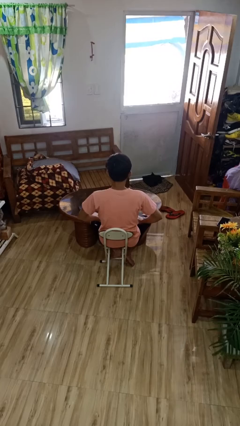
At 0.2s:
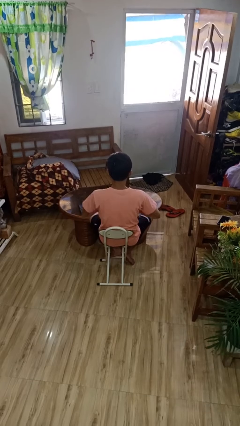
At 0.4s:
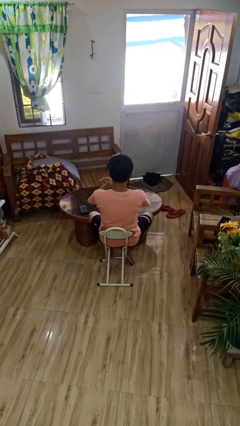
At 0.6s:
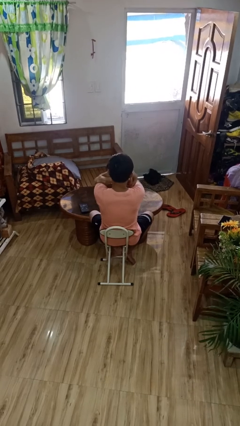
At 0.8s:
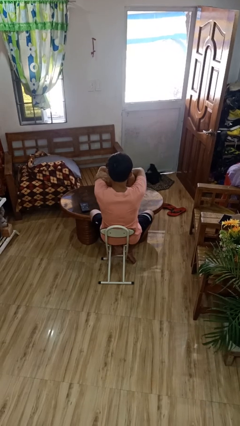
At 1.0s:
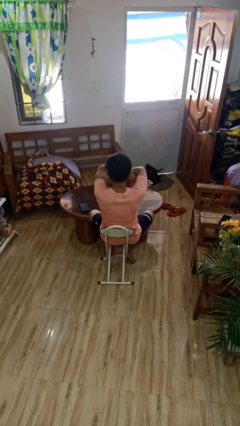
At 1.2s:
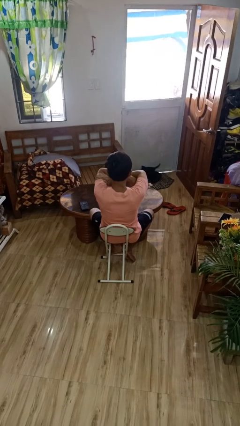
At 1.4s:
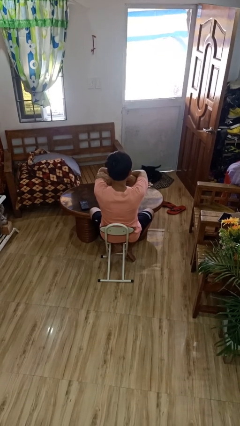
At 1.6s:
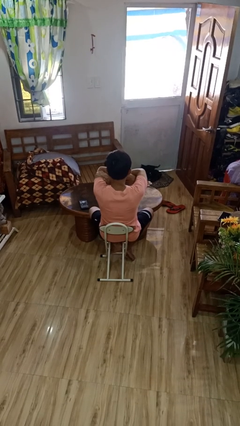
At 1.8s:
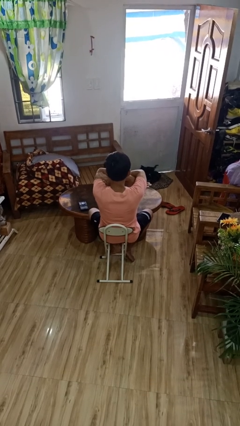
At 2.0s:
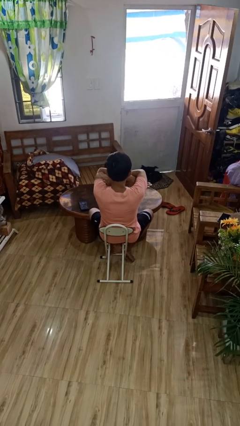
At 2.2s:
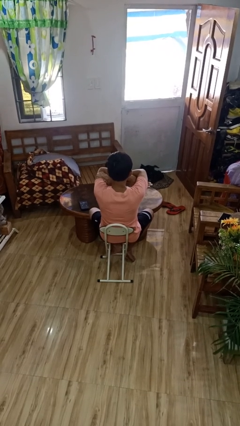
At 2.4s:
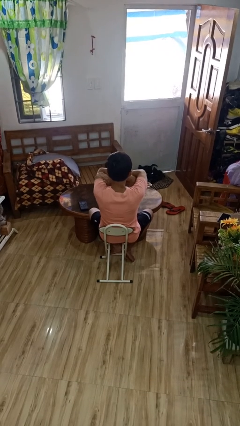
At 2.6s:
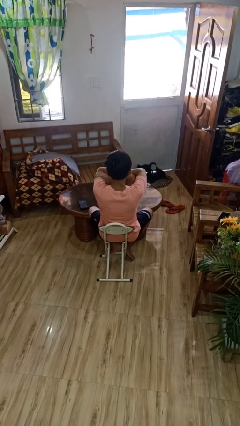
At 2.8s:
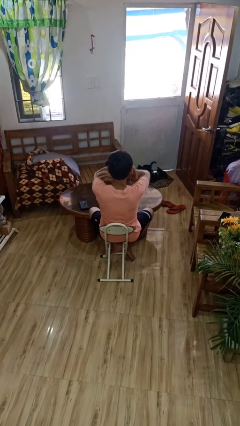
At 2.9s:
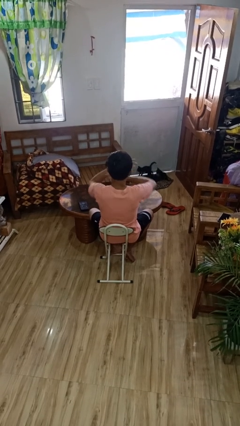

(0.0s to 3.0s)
person crosses arms

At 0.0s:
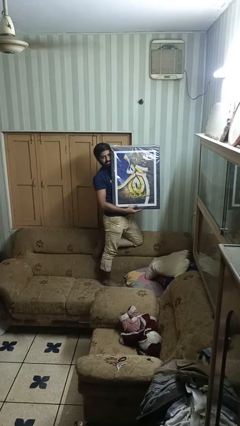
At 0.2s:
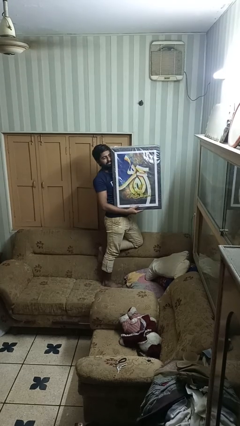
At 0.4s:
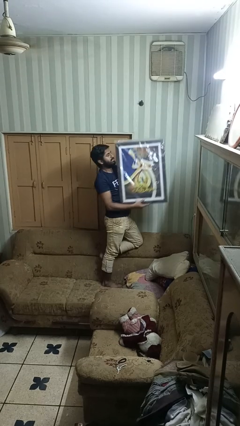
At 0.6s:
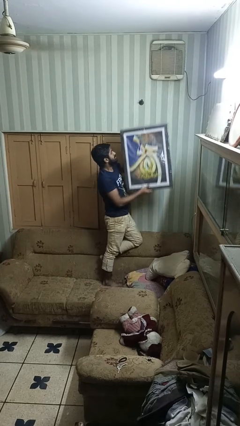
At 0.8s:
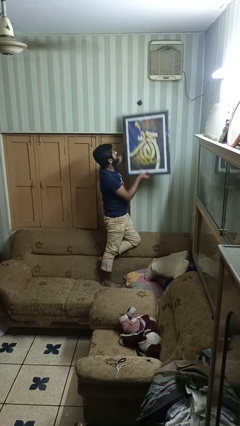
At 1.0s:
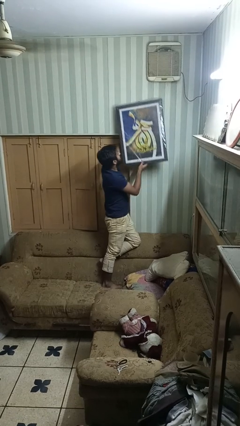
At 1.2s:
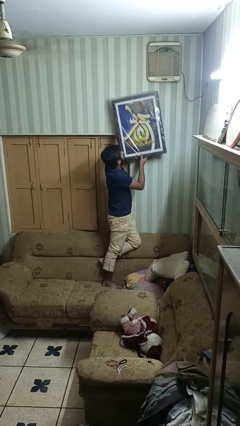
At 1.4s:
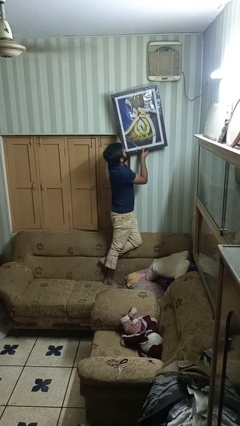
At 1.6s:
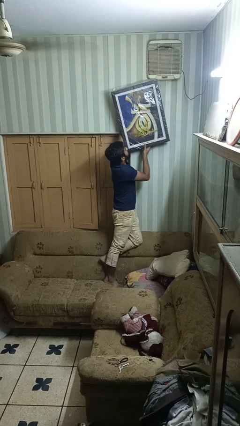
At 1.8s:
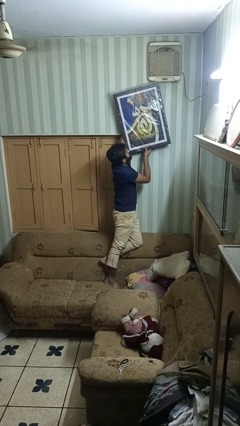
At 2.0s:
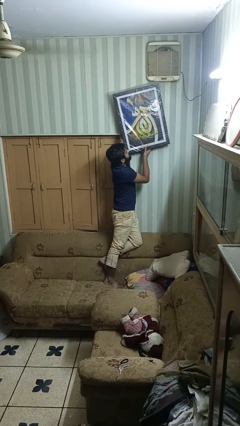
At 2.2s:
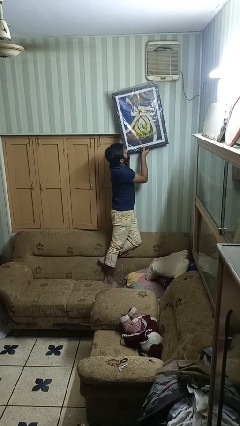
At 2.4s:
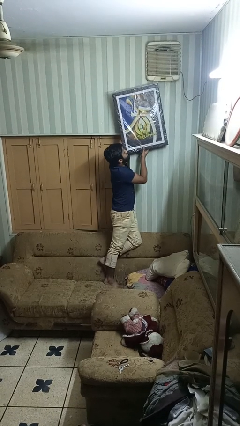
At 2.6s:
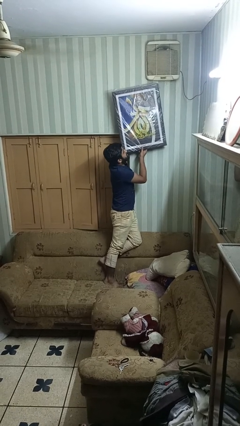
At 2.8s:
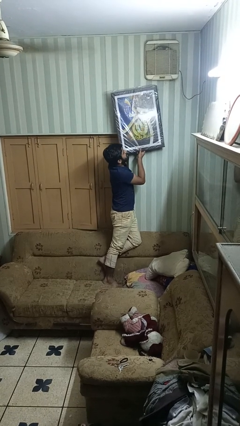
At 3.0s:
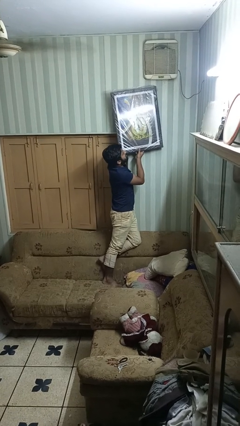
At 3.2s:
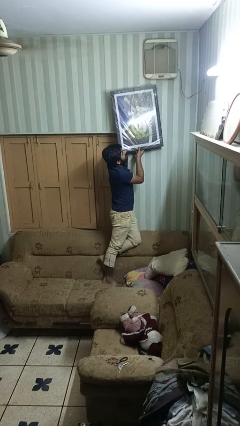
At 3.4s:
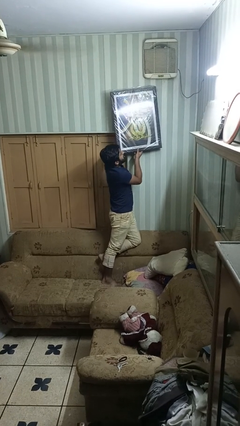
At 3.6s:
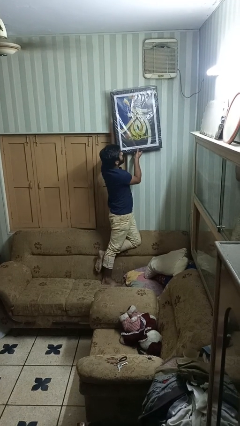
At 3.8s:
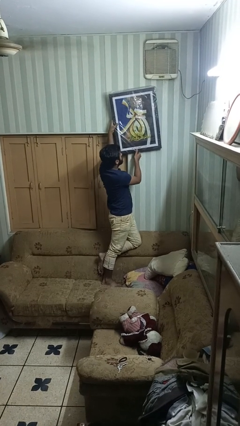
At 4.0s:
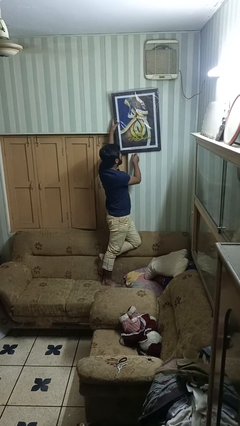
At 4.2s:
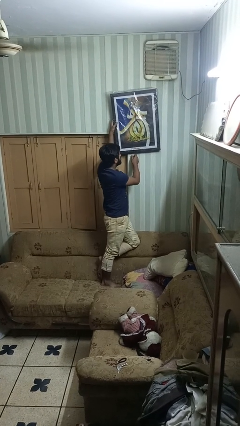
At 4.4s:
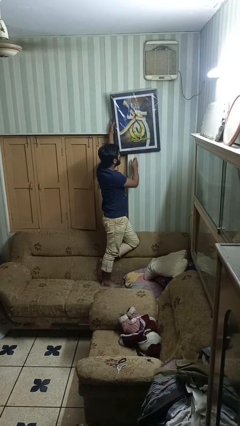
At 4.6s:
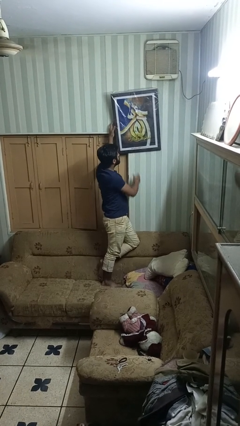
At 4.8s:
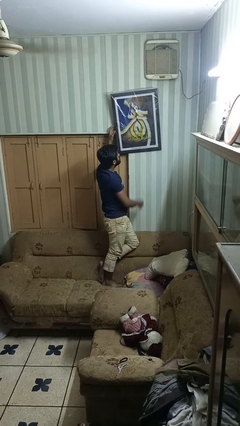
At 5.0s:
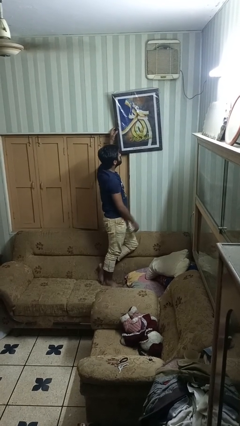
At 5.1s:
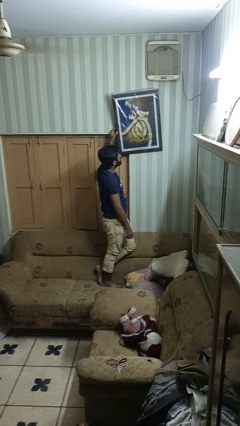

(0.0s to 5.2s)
person puts up picture frame

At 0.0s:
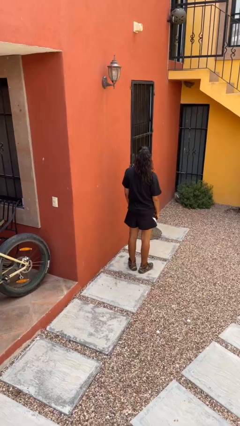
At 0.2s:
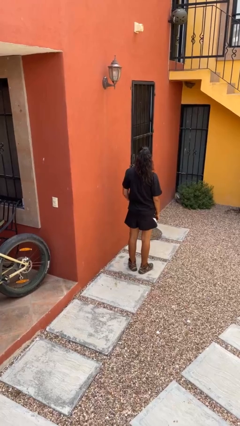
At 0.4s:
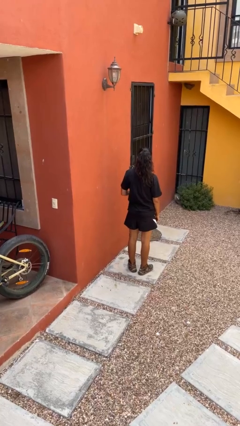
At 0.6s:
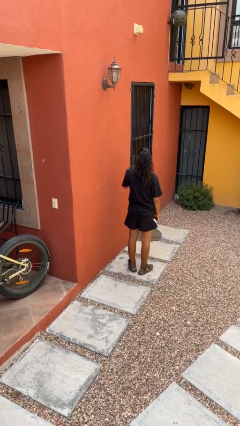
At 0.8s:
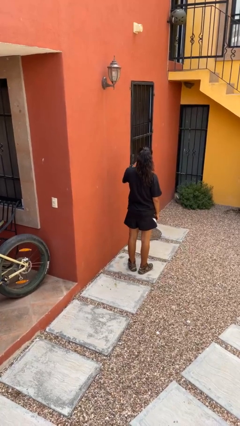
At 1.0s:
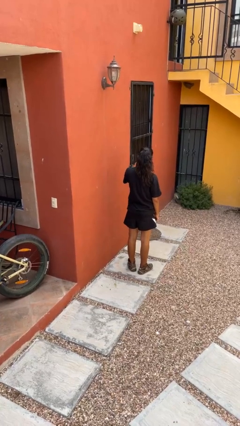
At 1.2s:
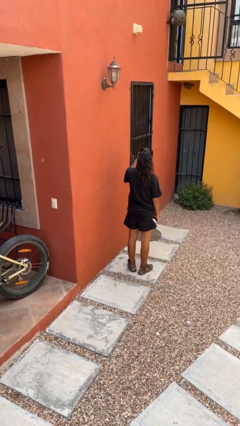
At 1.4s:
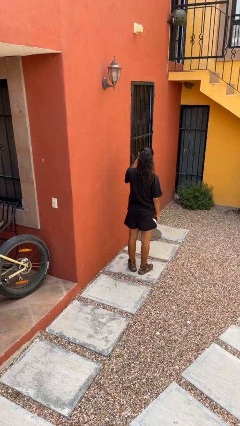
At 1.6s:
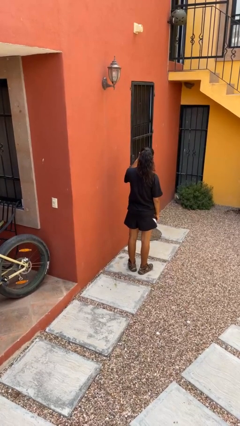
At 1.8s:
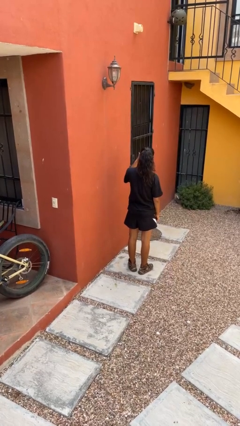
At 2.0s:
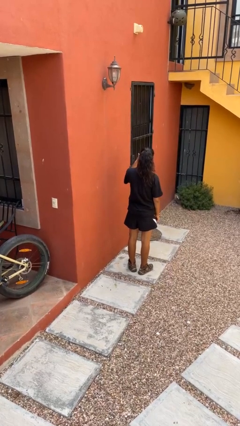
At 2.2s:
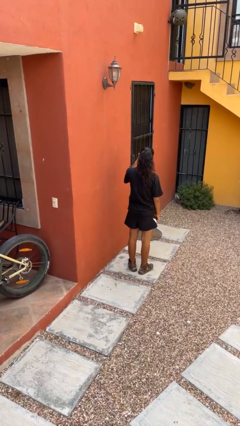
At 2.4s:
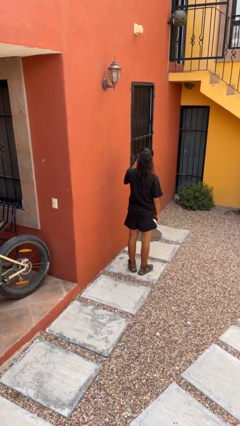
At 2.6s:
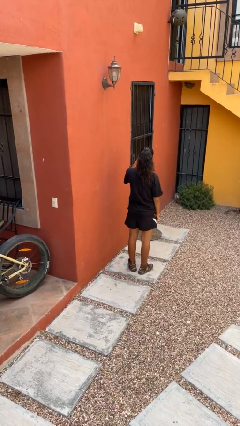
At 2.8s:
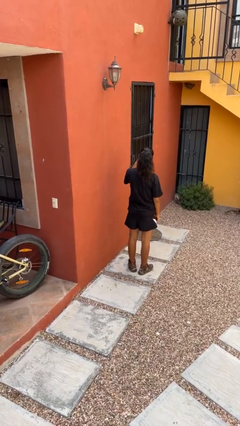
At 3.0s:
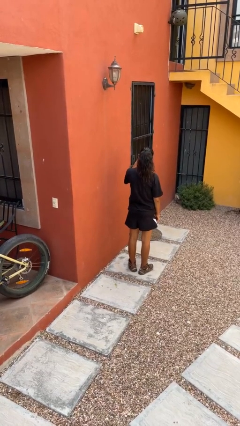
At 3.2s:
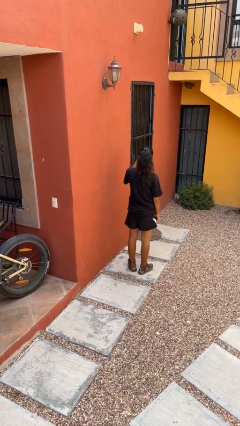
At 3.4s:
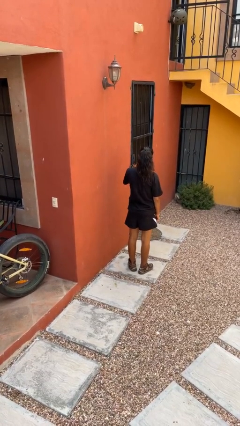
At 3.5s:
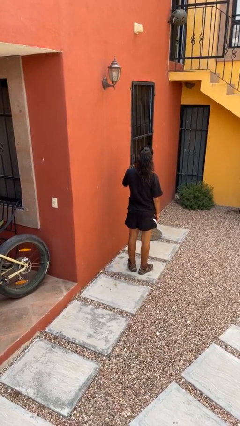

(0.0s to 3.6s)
person gestures thumbs up

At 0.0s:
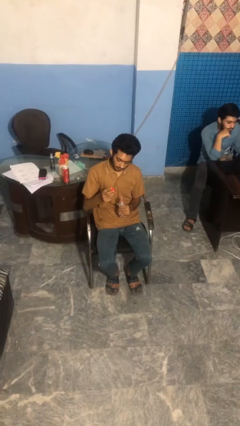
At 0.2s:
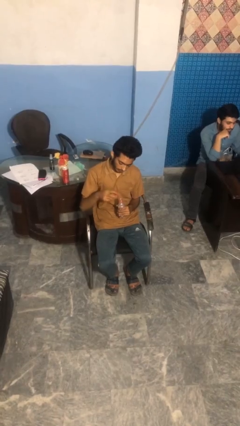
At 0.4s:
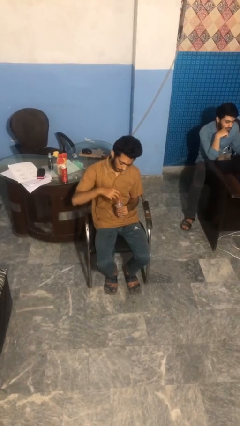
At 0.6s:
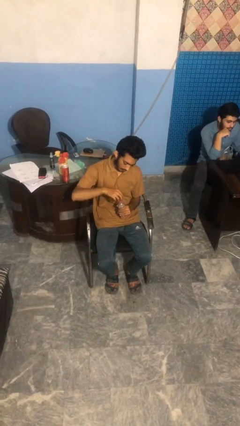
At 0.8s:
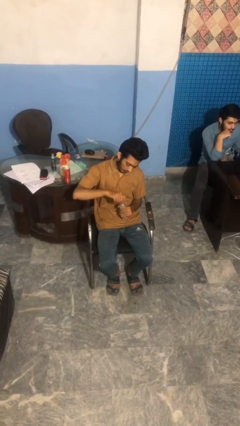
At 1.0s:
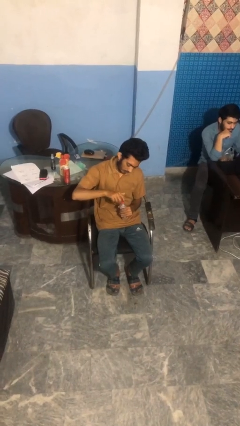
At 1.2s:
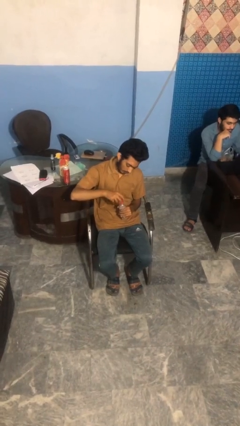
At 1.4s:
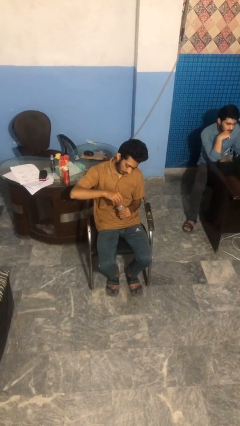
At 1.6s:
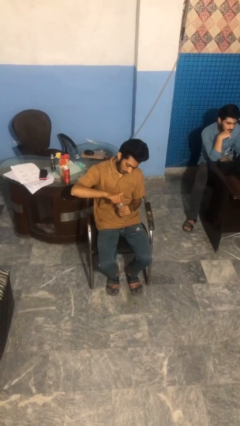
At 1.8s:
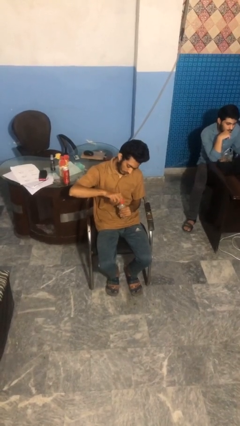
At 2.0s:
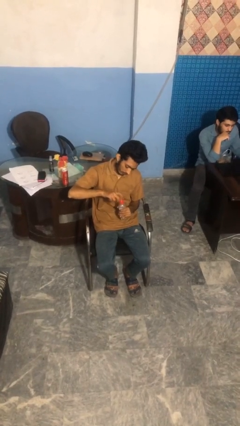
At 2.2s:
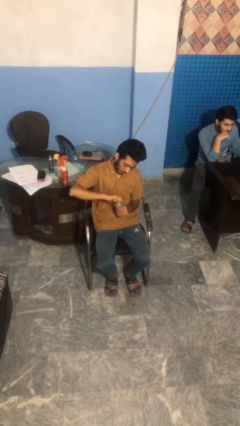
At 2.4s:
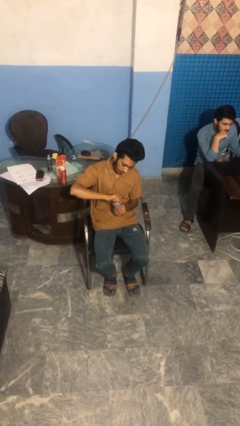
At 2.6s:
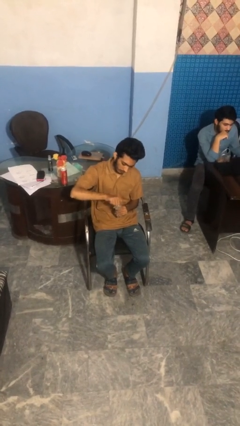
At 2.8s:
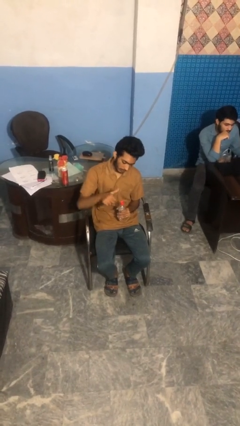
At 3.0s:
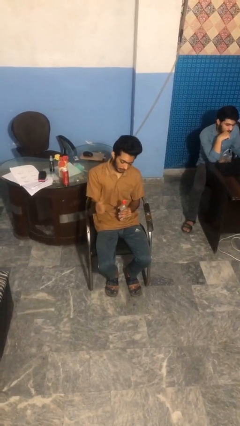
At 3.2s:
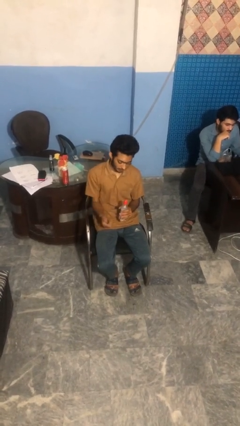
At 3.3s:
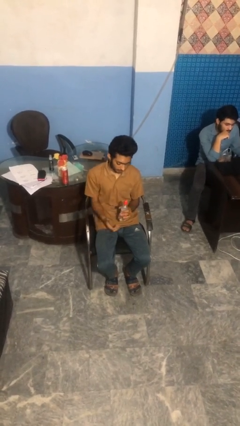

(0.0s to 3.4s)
person screws lid to bottle

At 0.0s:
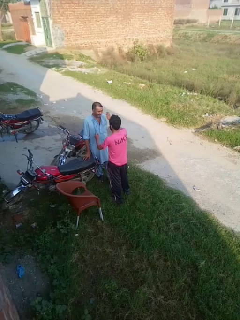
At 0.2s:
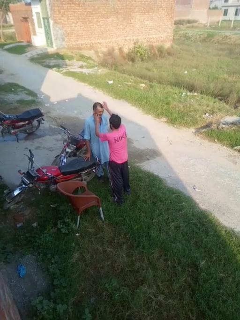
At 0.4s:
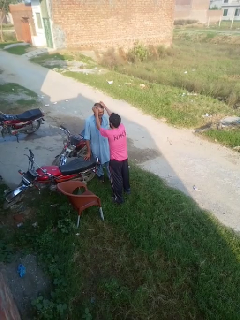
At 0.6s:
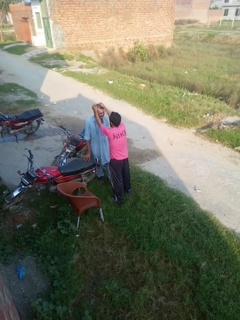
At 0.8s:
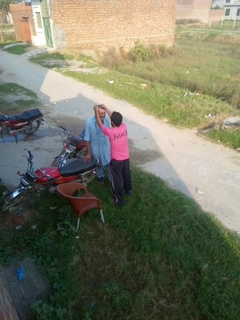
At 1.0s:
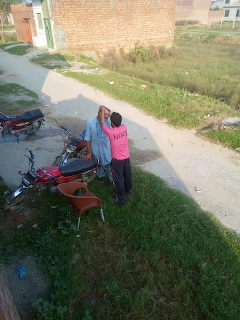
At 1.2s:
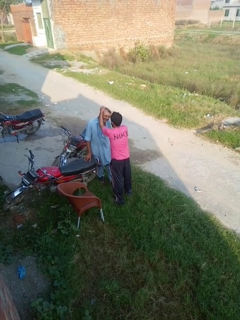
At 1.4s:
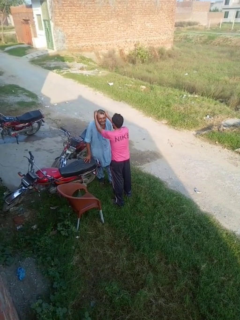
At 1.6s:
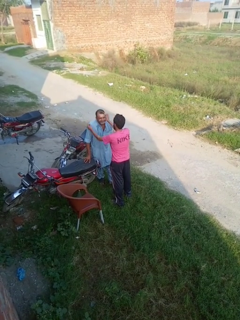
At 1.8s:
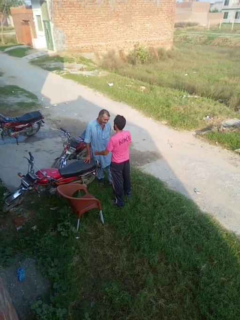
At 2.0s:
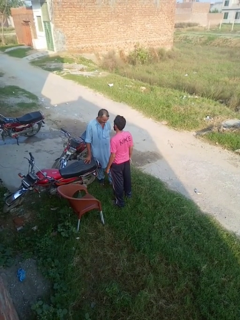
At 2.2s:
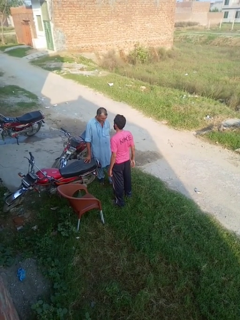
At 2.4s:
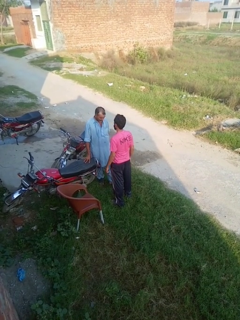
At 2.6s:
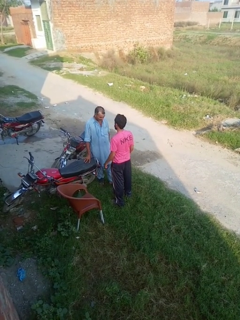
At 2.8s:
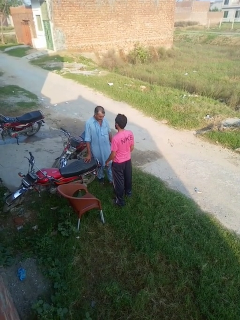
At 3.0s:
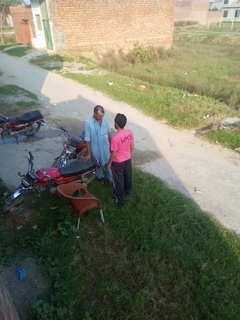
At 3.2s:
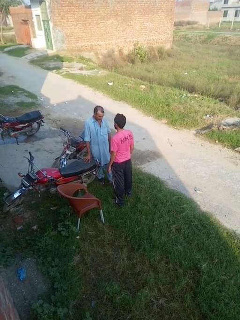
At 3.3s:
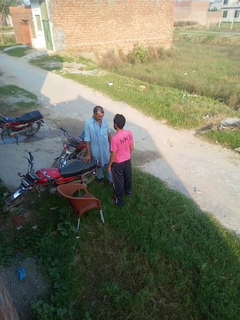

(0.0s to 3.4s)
person grabs person by hair
